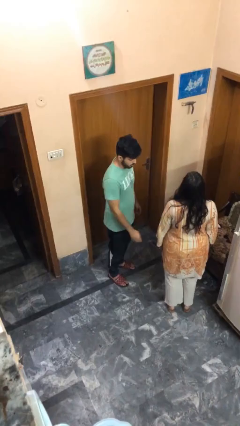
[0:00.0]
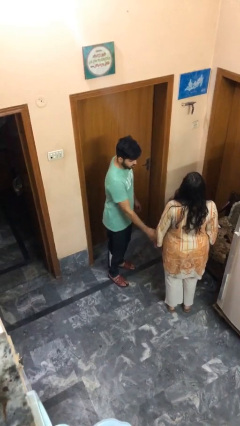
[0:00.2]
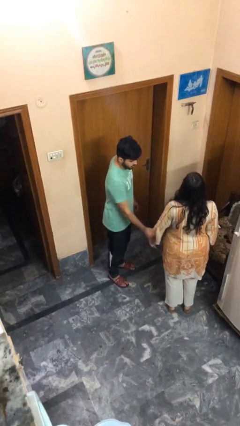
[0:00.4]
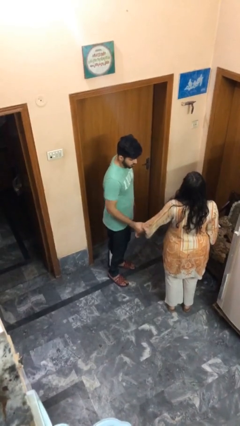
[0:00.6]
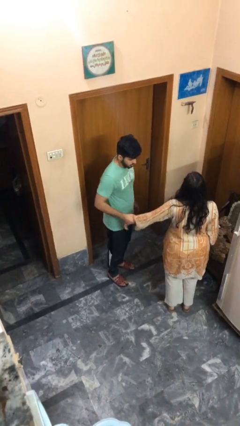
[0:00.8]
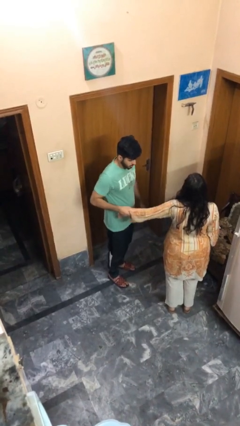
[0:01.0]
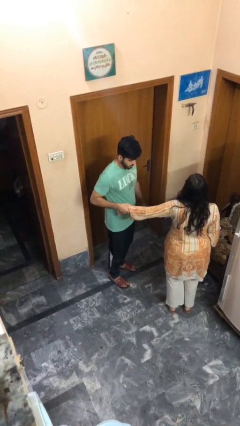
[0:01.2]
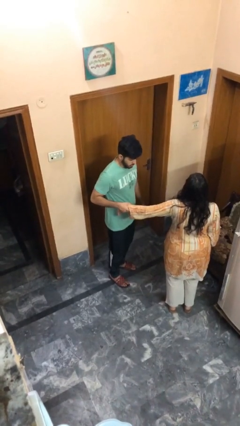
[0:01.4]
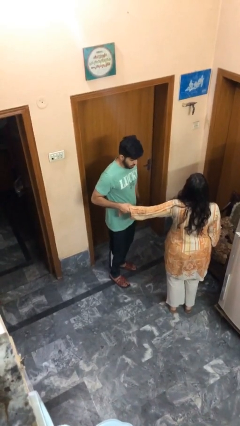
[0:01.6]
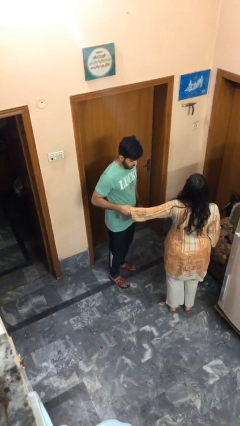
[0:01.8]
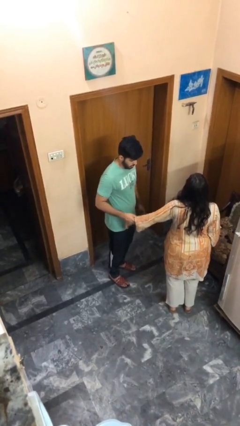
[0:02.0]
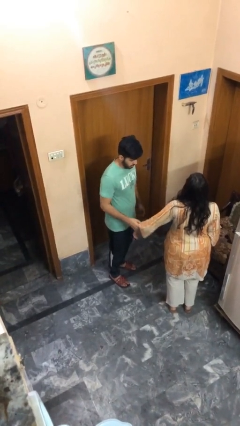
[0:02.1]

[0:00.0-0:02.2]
person grabs person by forearm

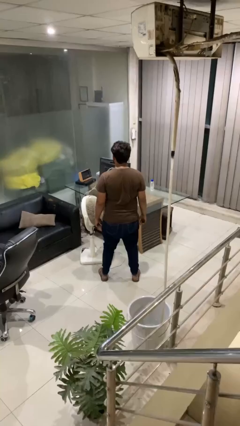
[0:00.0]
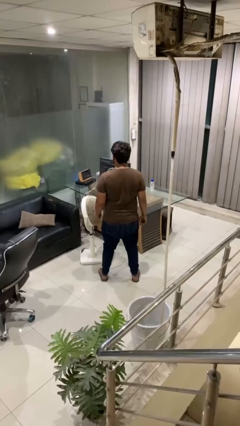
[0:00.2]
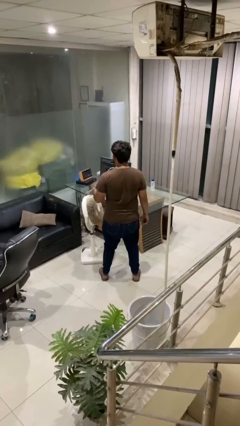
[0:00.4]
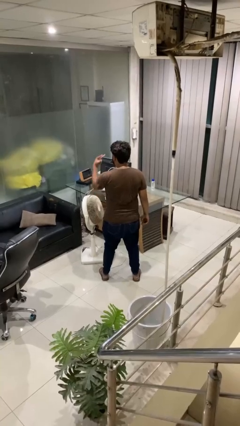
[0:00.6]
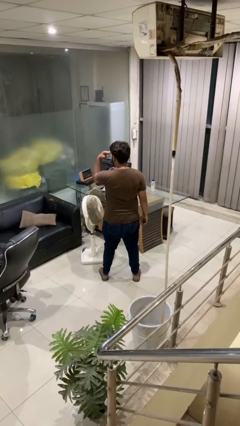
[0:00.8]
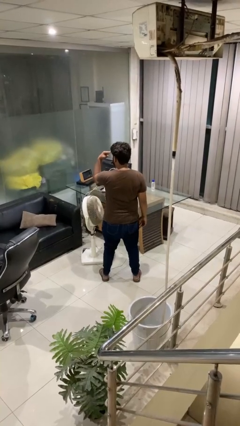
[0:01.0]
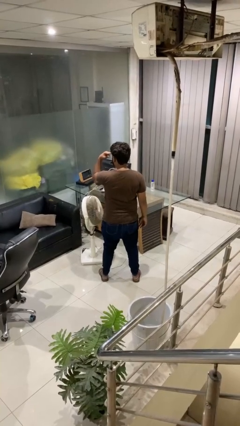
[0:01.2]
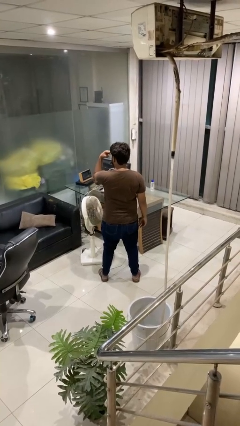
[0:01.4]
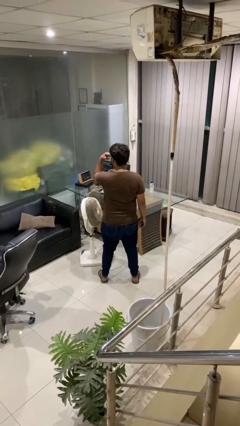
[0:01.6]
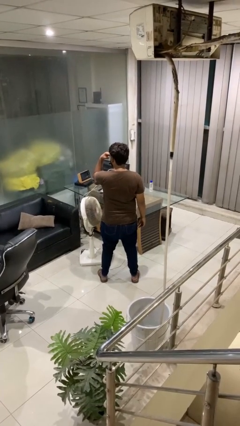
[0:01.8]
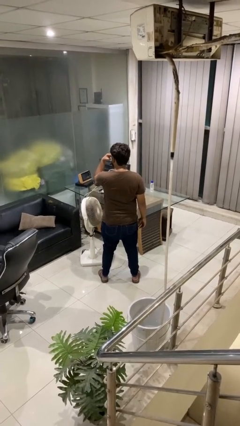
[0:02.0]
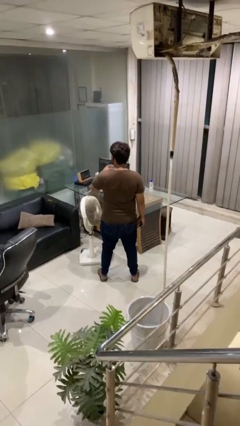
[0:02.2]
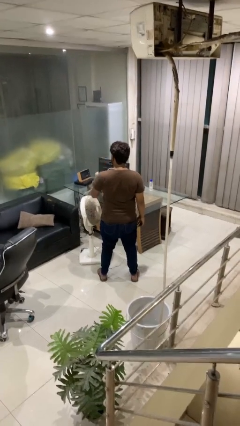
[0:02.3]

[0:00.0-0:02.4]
person gestures watch closely

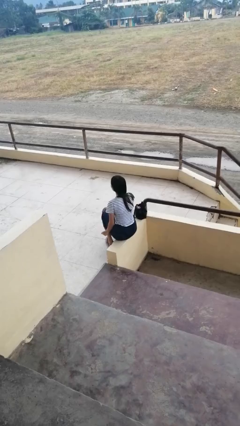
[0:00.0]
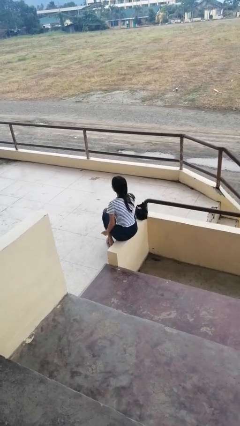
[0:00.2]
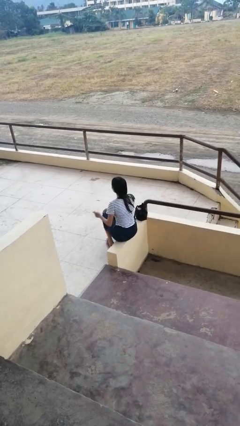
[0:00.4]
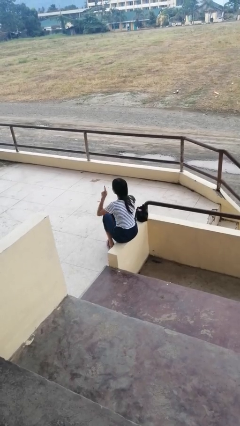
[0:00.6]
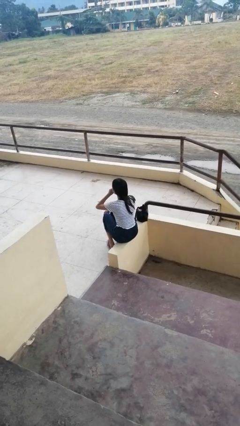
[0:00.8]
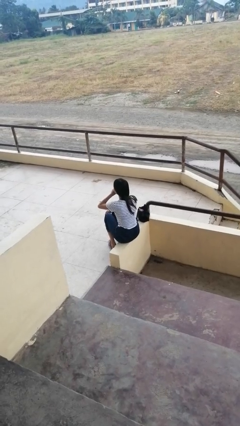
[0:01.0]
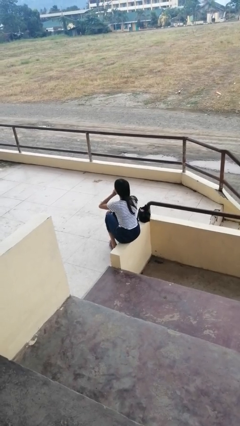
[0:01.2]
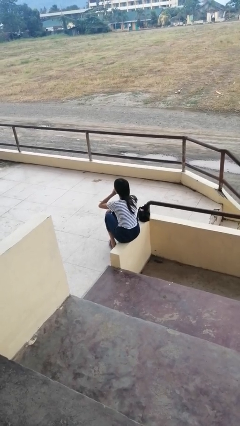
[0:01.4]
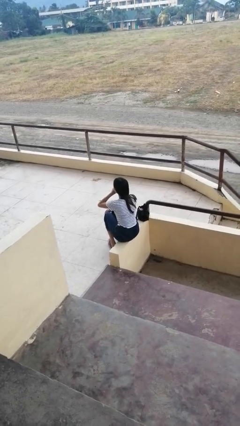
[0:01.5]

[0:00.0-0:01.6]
person gestures be quiet

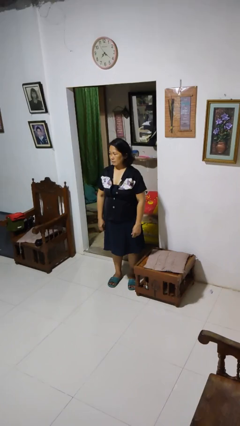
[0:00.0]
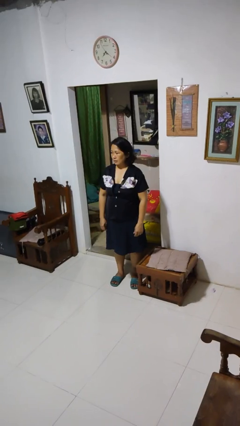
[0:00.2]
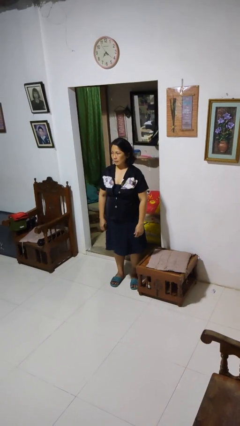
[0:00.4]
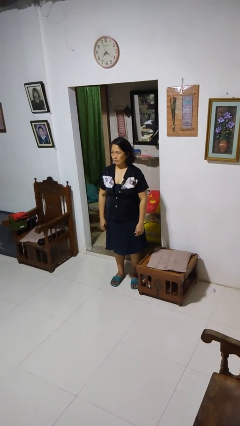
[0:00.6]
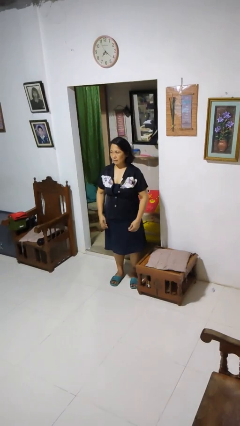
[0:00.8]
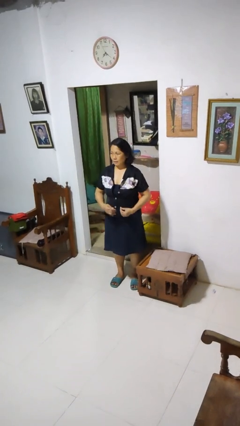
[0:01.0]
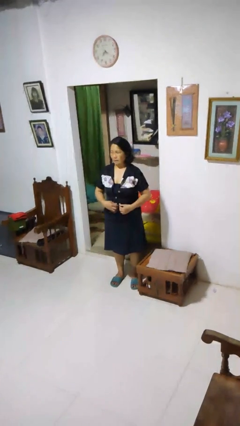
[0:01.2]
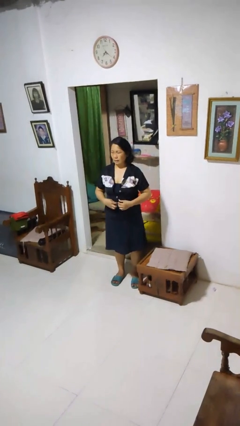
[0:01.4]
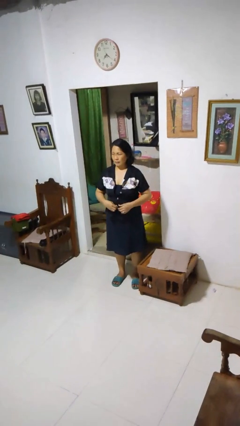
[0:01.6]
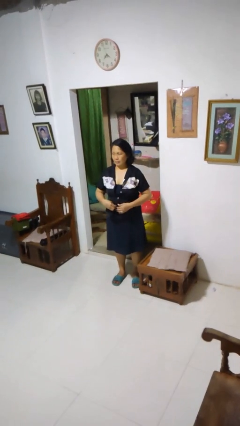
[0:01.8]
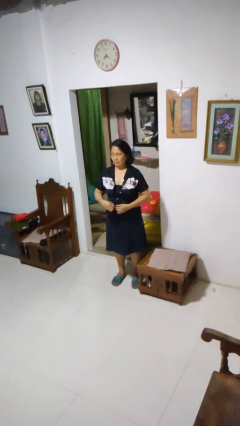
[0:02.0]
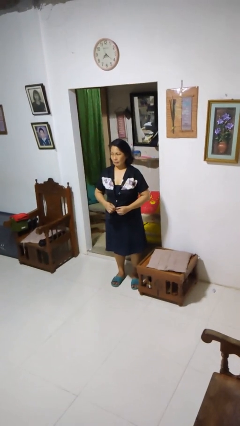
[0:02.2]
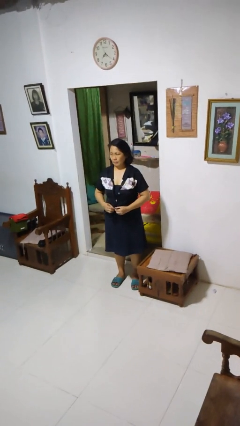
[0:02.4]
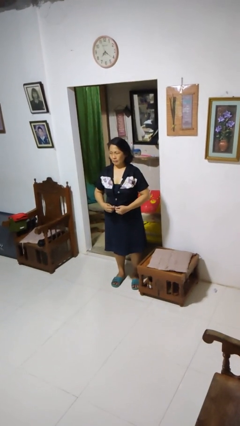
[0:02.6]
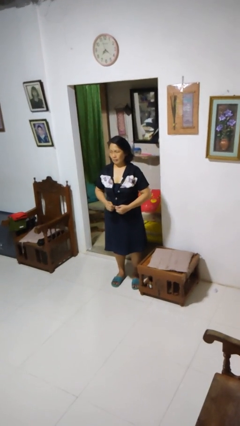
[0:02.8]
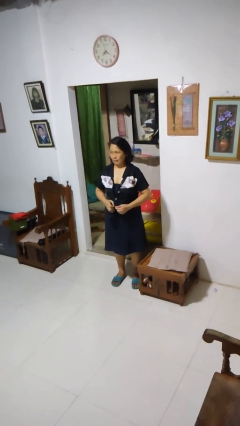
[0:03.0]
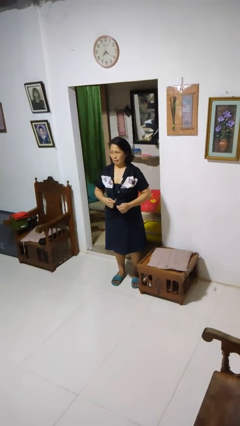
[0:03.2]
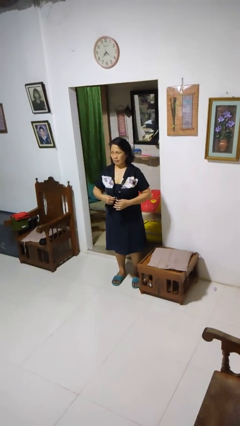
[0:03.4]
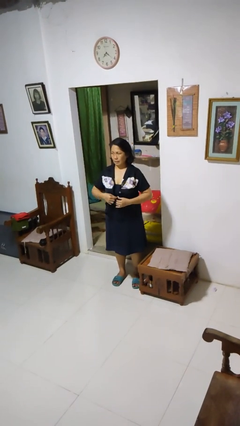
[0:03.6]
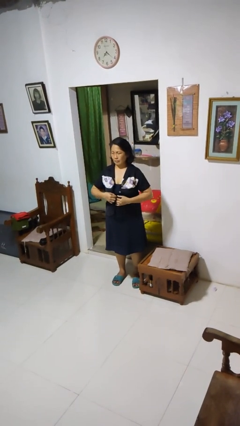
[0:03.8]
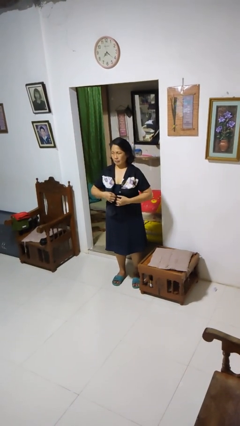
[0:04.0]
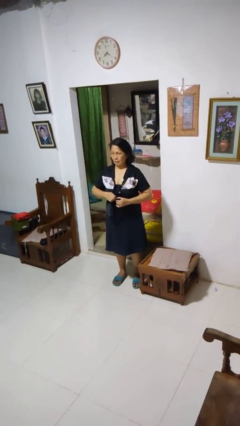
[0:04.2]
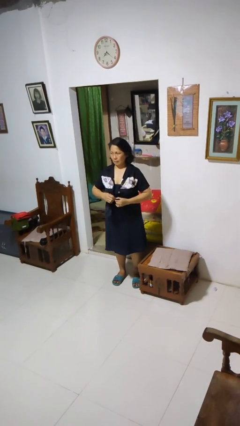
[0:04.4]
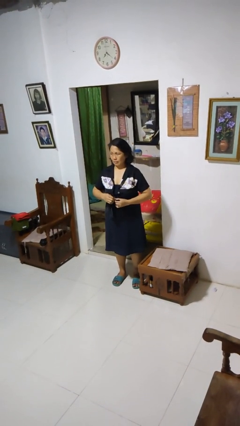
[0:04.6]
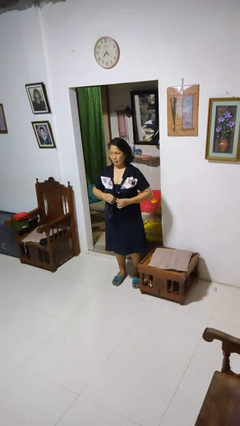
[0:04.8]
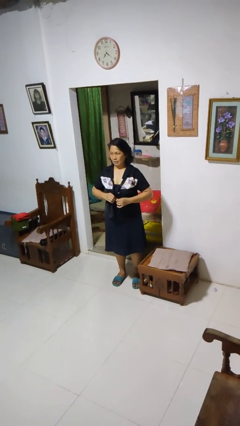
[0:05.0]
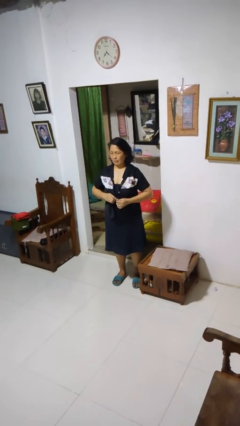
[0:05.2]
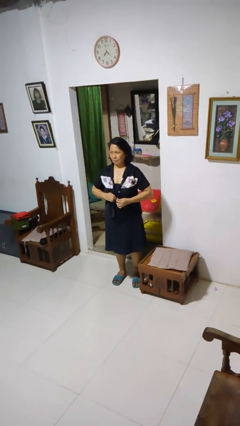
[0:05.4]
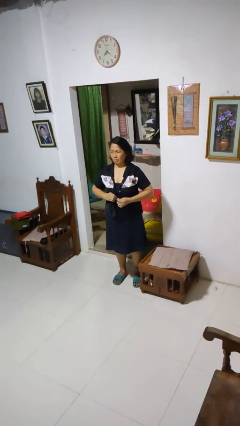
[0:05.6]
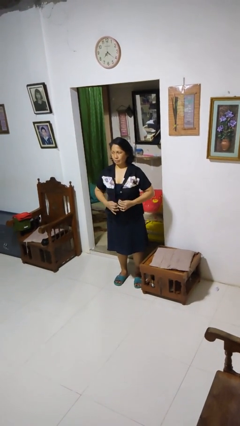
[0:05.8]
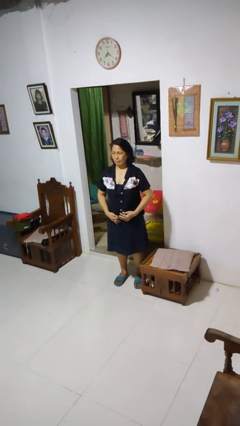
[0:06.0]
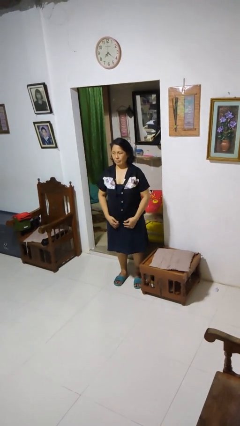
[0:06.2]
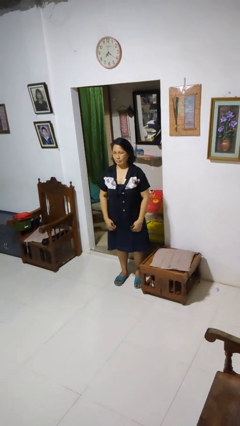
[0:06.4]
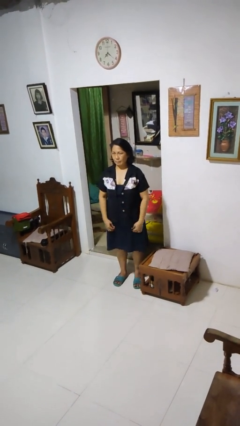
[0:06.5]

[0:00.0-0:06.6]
person unbuttons shirt

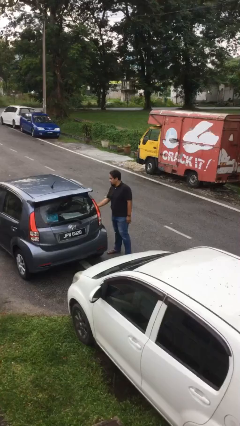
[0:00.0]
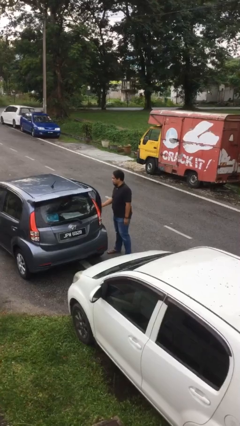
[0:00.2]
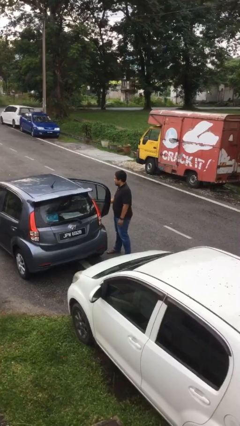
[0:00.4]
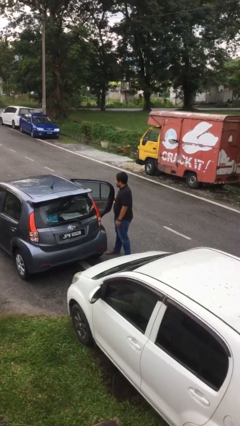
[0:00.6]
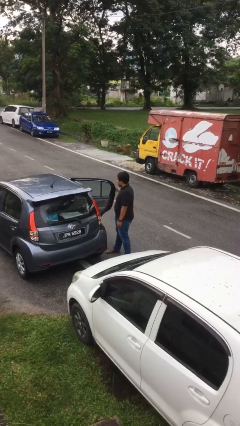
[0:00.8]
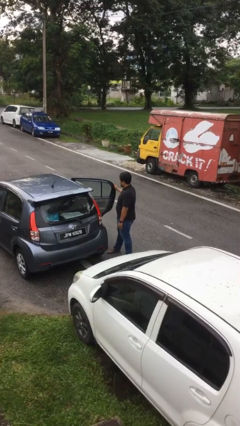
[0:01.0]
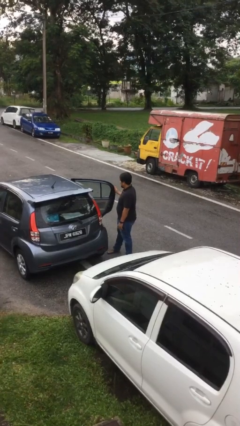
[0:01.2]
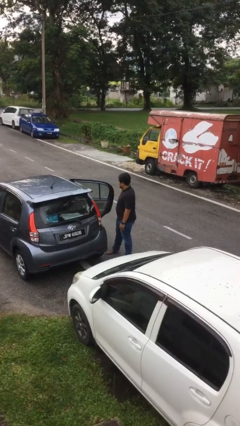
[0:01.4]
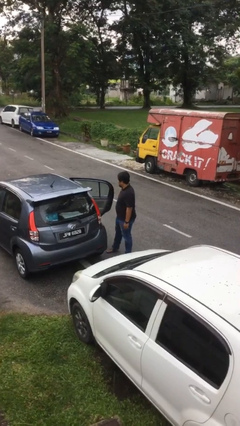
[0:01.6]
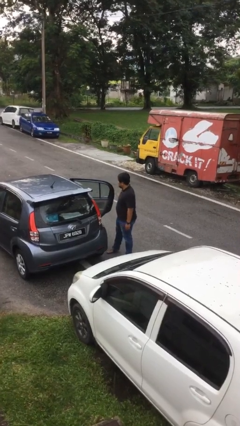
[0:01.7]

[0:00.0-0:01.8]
person opens car door

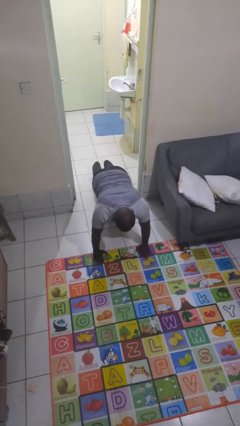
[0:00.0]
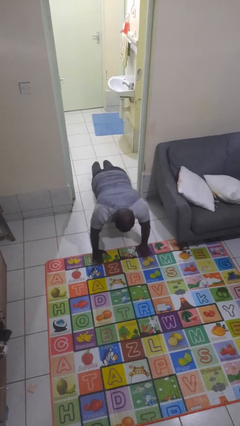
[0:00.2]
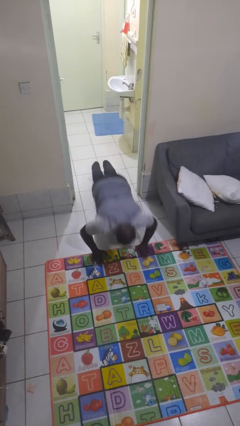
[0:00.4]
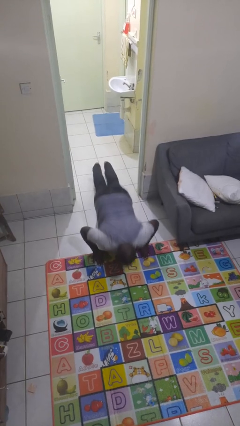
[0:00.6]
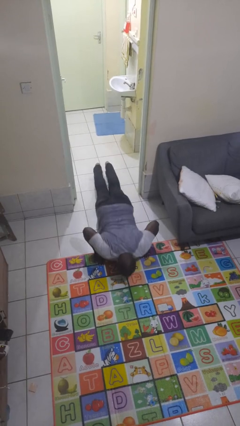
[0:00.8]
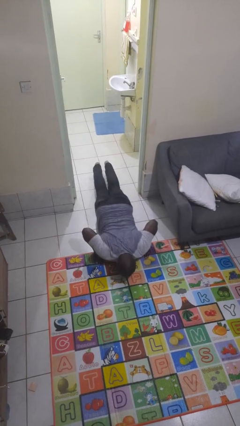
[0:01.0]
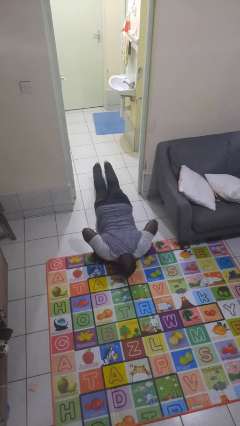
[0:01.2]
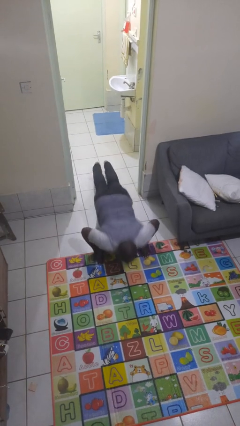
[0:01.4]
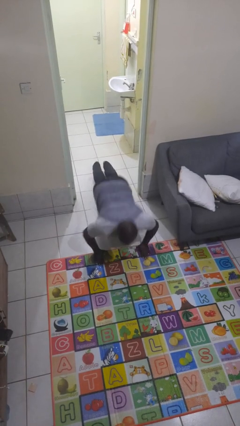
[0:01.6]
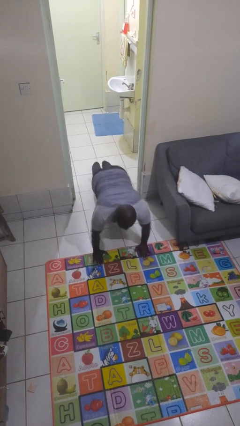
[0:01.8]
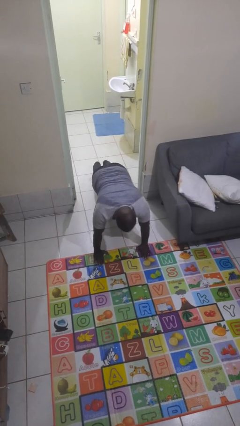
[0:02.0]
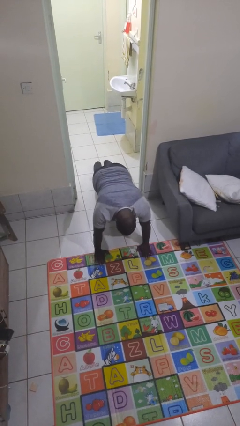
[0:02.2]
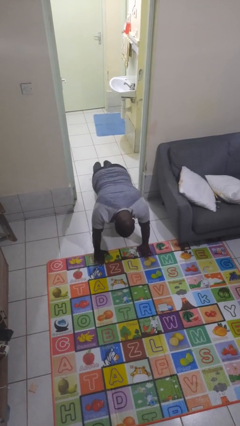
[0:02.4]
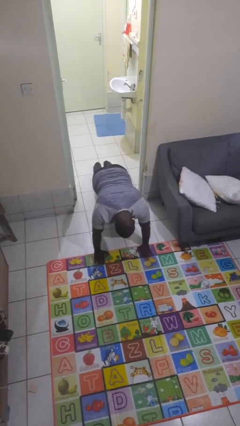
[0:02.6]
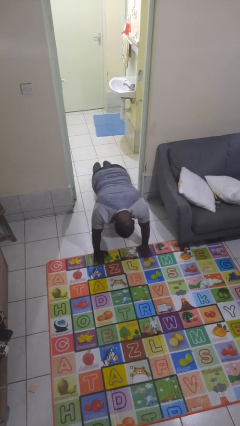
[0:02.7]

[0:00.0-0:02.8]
person exercises with pushup
